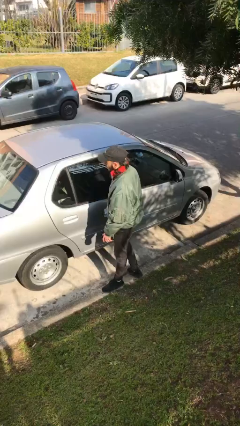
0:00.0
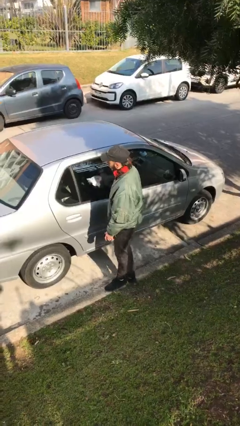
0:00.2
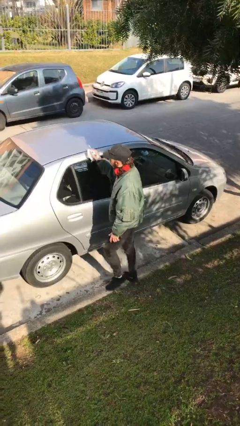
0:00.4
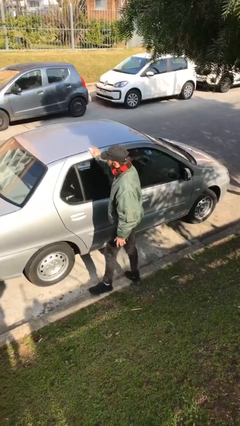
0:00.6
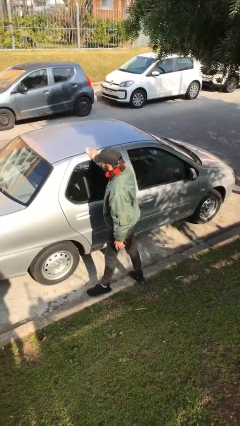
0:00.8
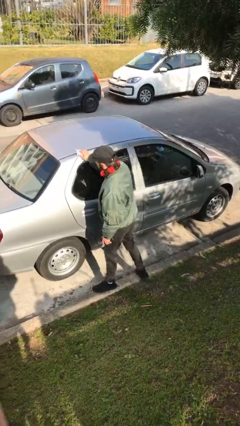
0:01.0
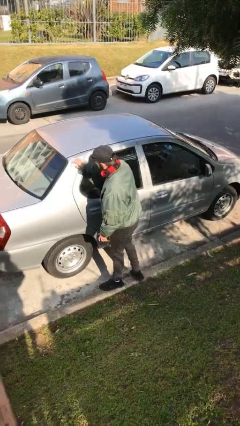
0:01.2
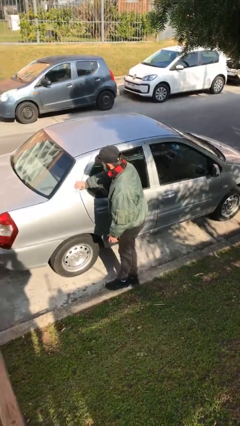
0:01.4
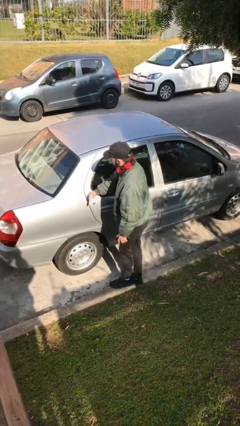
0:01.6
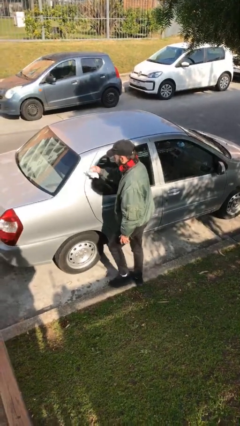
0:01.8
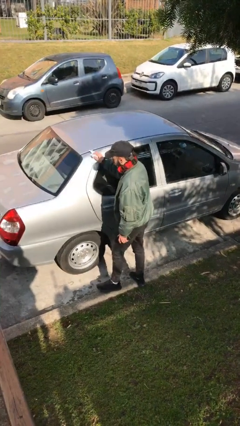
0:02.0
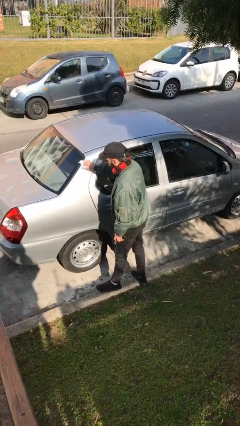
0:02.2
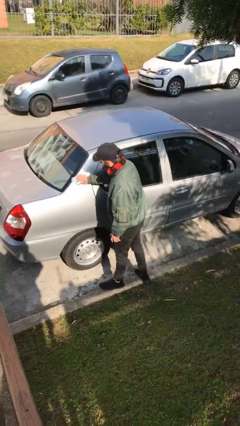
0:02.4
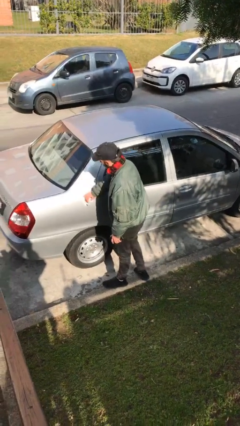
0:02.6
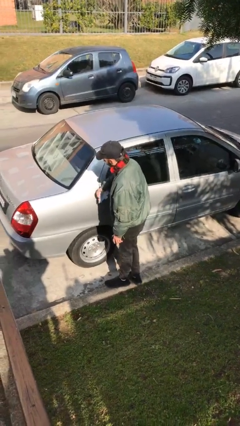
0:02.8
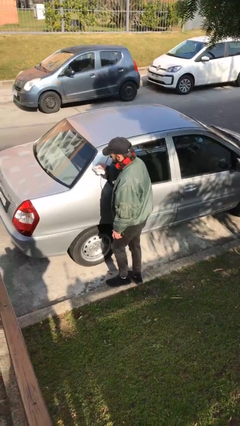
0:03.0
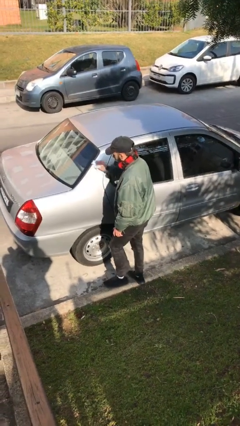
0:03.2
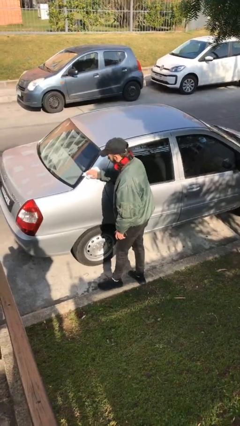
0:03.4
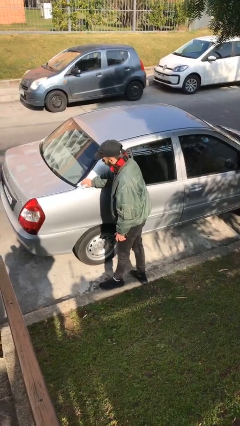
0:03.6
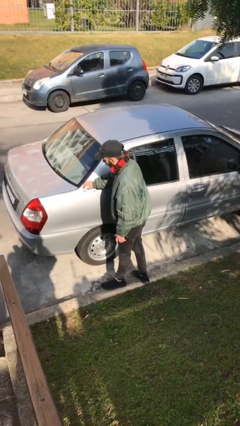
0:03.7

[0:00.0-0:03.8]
person polishes car with rag

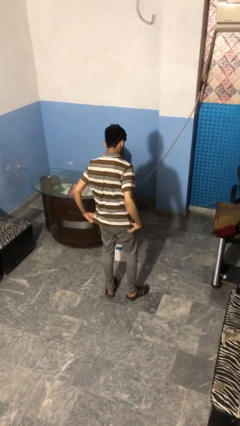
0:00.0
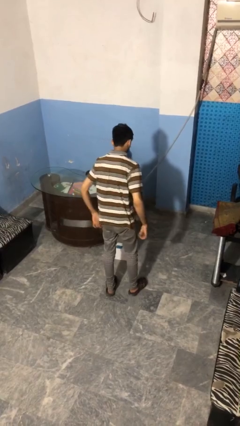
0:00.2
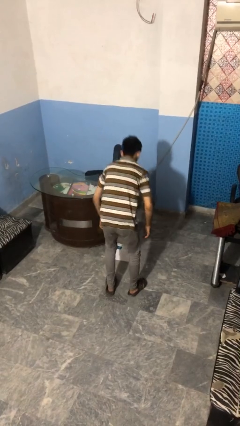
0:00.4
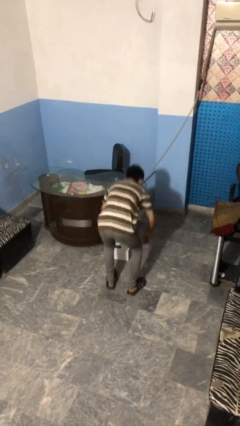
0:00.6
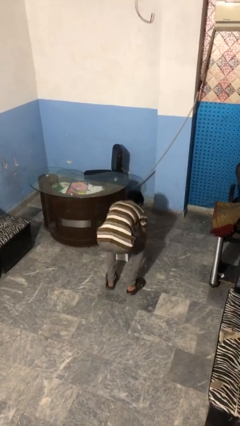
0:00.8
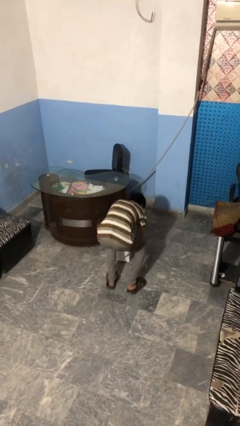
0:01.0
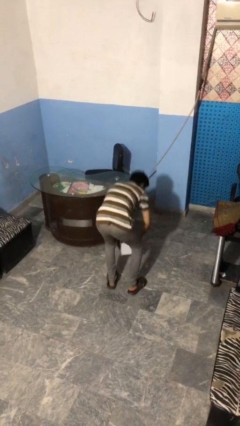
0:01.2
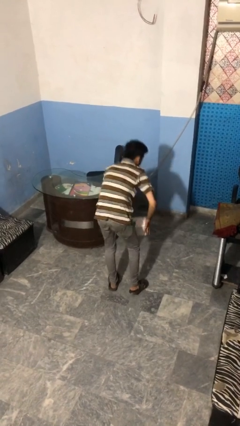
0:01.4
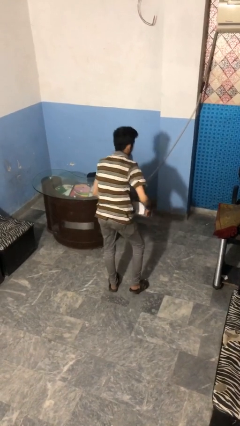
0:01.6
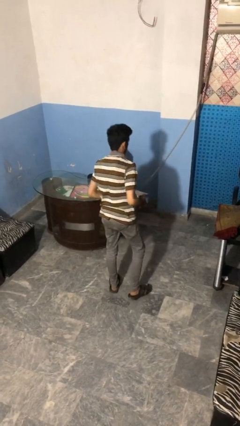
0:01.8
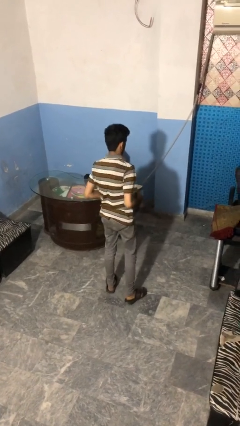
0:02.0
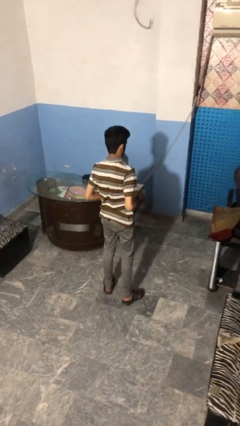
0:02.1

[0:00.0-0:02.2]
person picks up object from floor

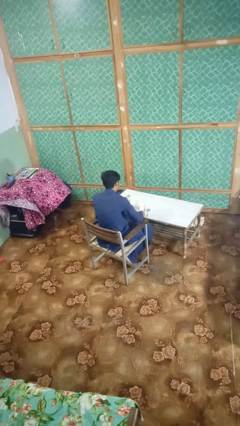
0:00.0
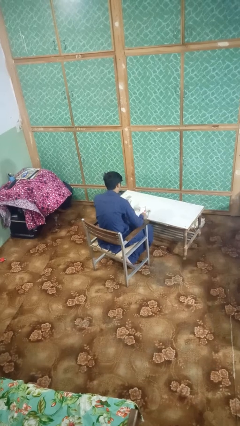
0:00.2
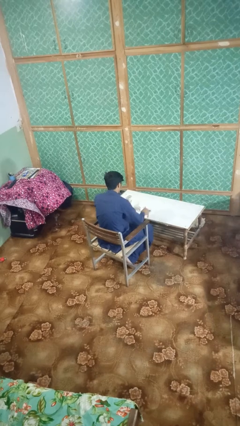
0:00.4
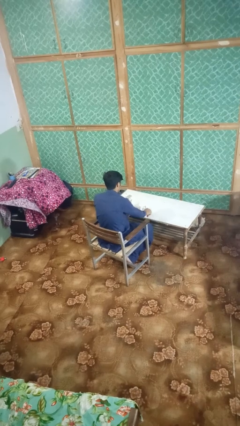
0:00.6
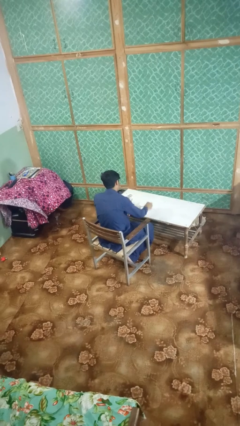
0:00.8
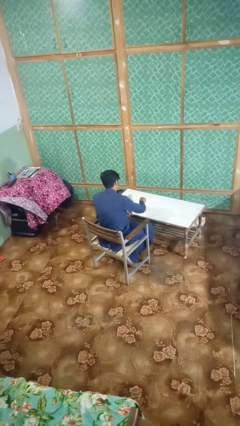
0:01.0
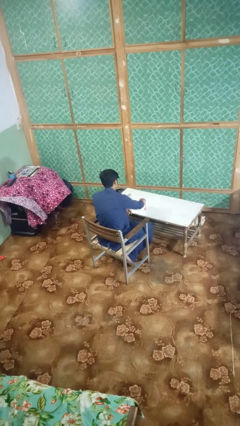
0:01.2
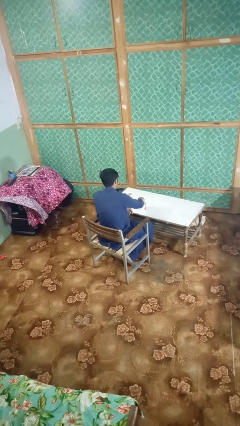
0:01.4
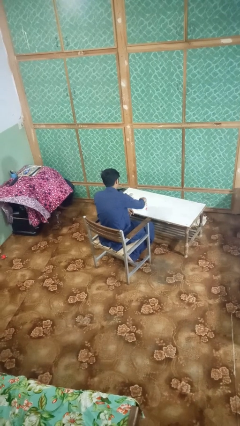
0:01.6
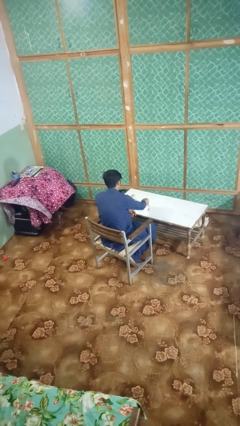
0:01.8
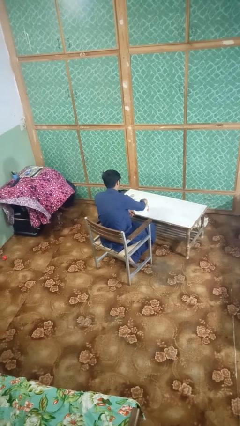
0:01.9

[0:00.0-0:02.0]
person stirs mug

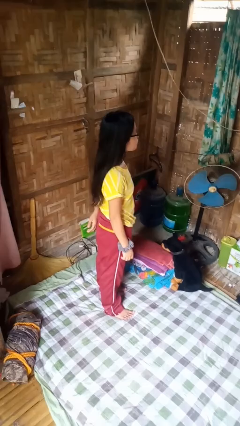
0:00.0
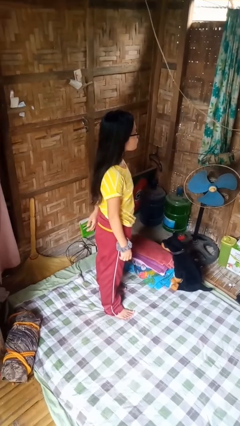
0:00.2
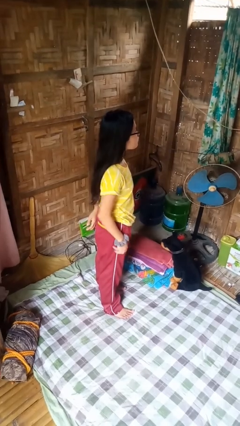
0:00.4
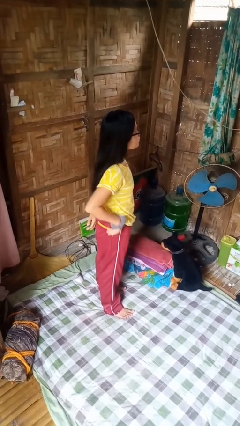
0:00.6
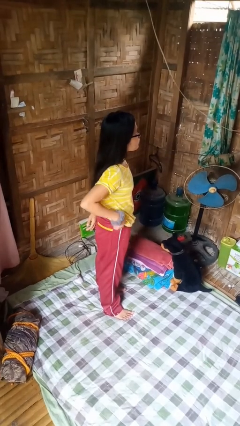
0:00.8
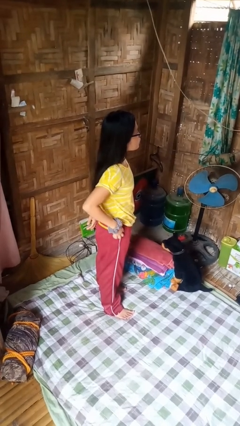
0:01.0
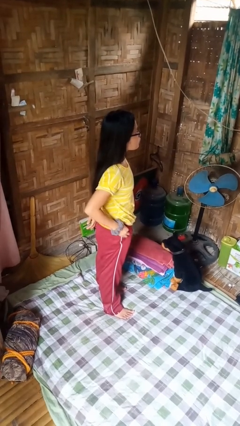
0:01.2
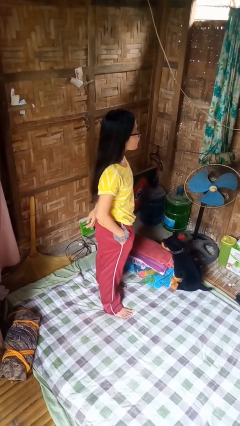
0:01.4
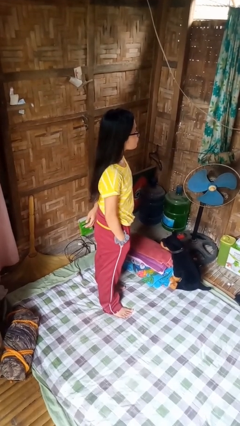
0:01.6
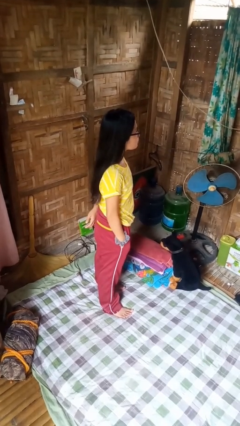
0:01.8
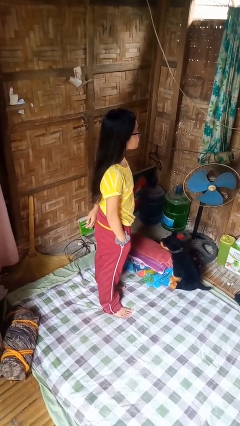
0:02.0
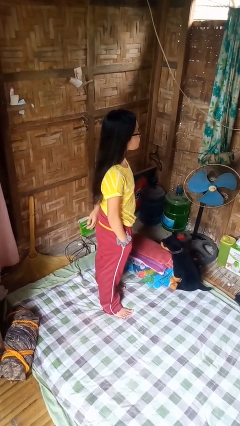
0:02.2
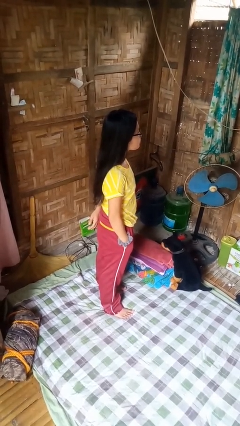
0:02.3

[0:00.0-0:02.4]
person puts hands in back pockets

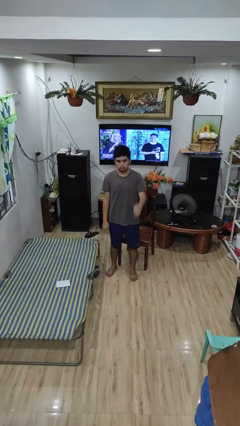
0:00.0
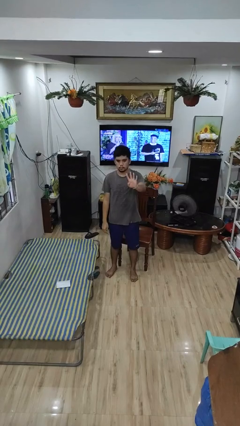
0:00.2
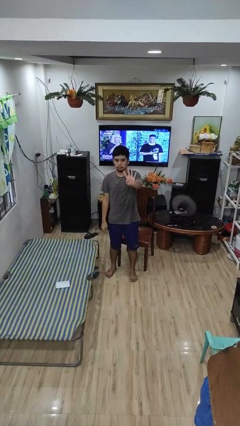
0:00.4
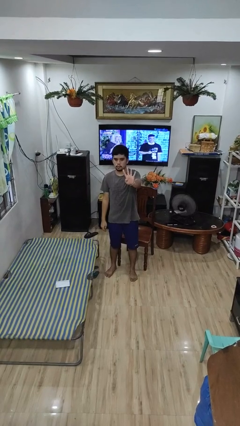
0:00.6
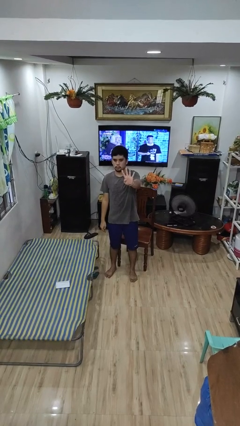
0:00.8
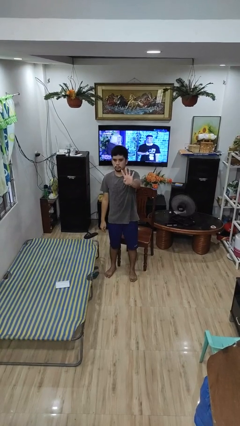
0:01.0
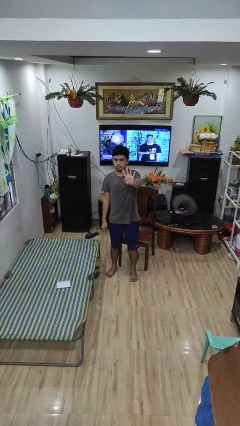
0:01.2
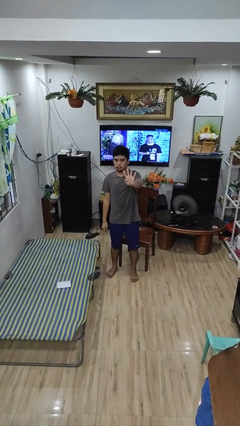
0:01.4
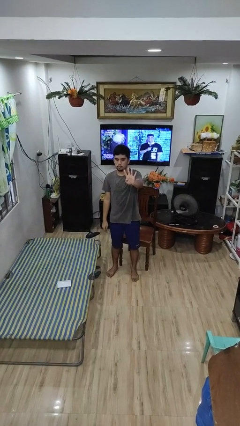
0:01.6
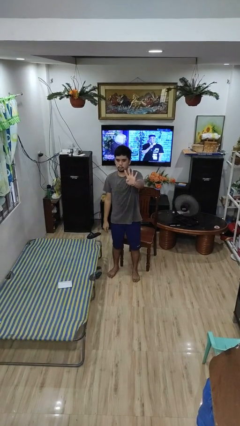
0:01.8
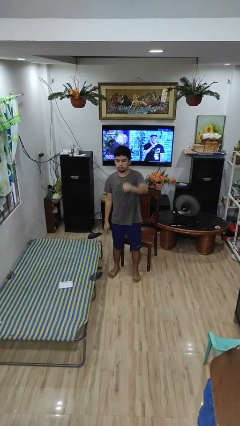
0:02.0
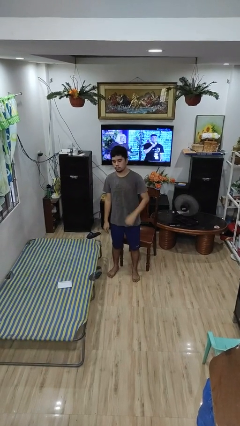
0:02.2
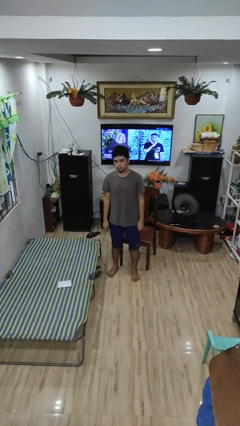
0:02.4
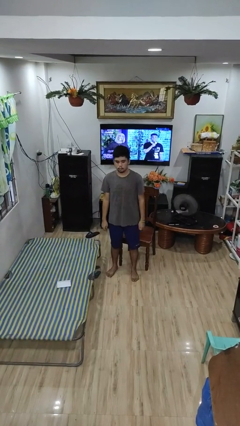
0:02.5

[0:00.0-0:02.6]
person gestures number four

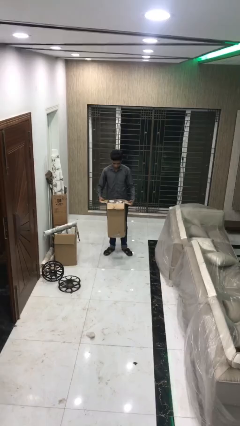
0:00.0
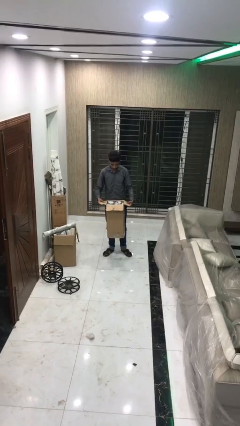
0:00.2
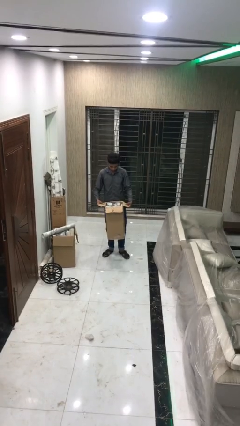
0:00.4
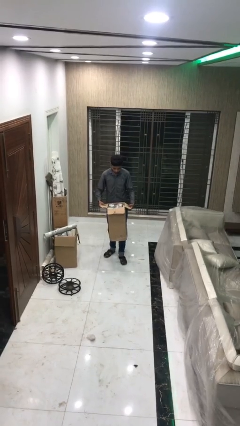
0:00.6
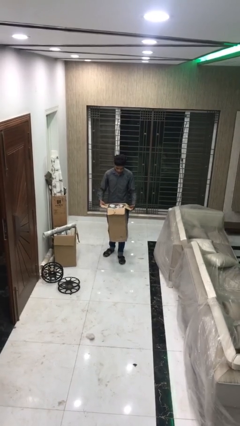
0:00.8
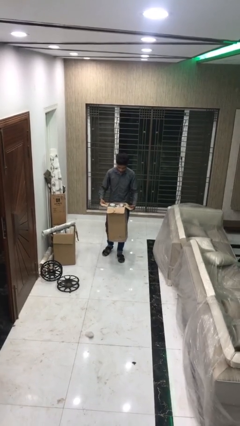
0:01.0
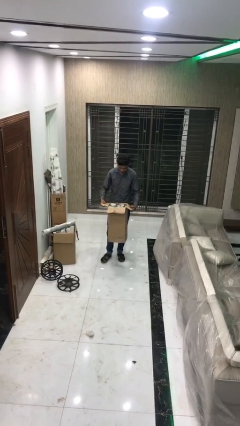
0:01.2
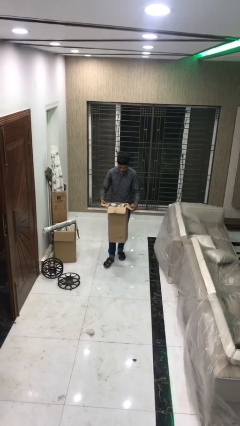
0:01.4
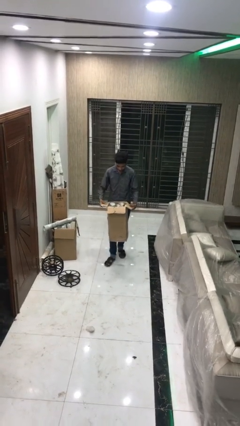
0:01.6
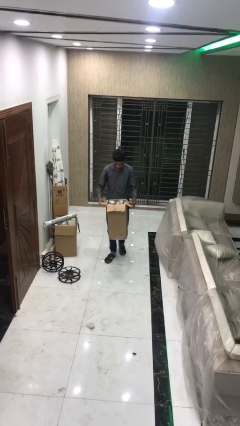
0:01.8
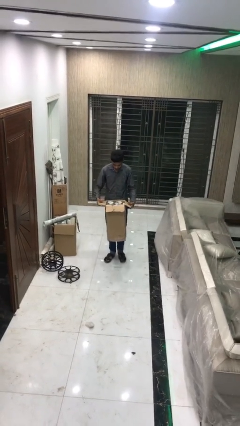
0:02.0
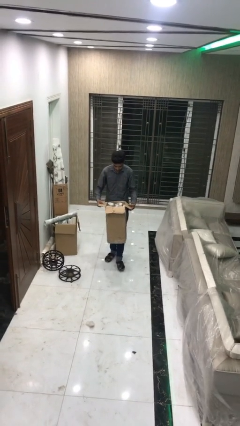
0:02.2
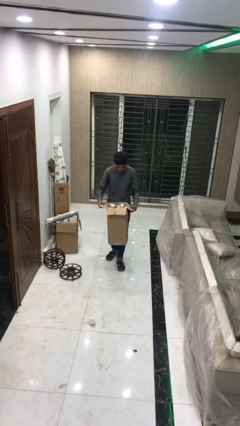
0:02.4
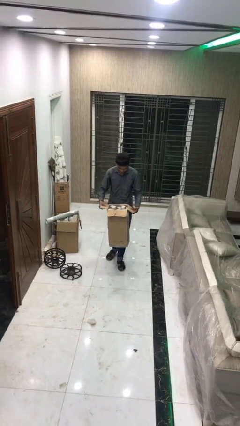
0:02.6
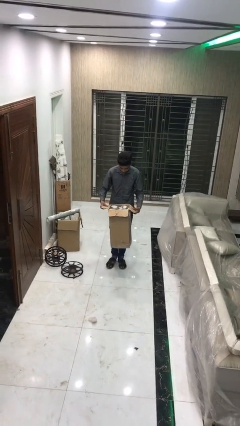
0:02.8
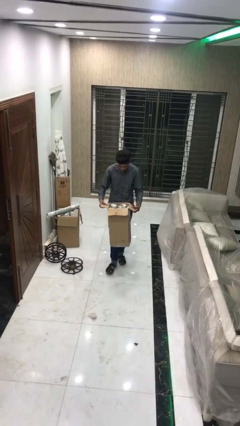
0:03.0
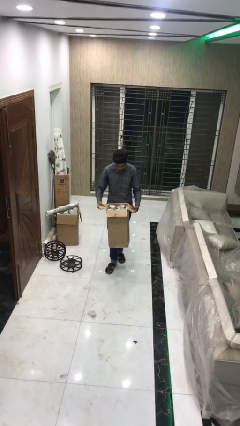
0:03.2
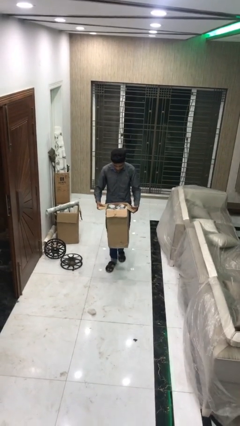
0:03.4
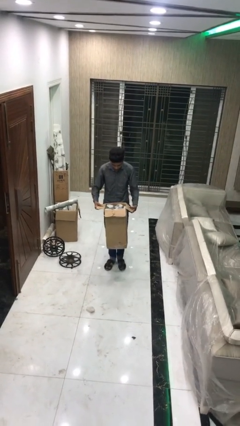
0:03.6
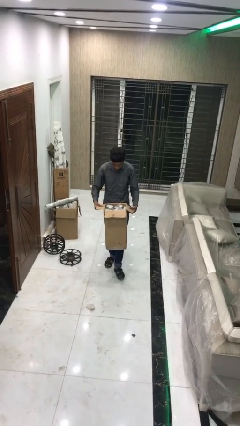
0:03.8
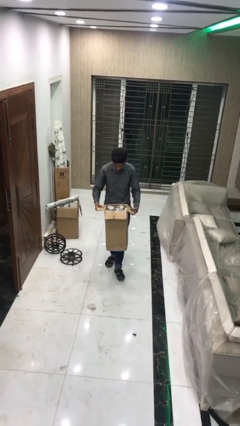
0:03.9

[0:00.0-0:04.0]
person carries heavy object

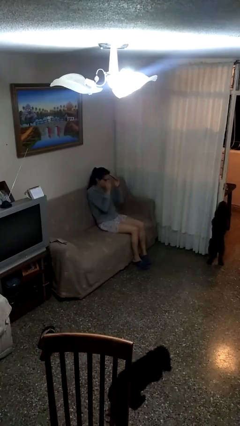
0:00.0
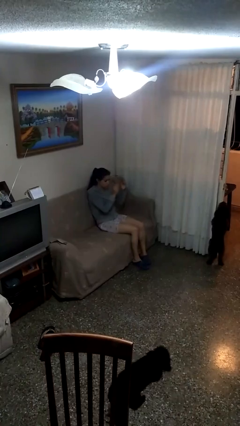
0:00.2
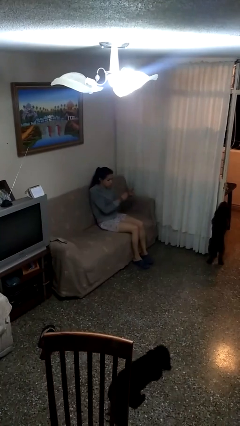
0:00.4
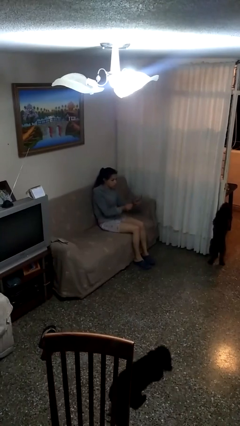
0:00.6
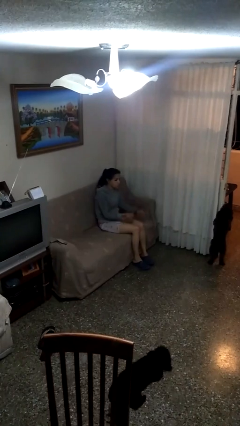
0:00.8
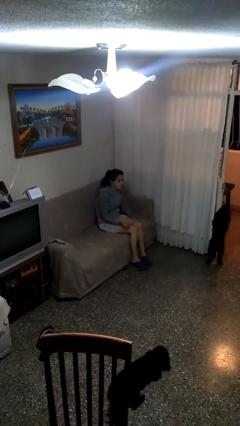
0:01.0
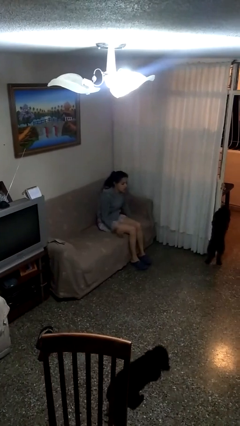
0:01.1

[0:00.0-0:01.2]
person takes off glasses
